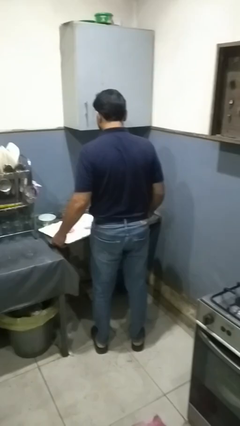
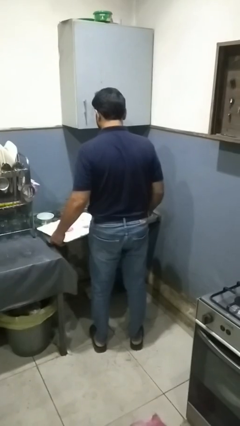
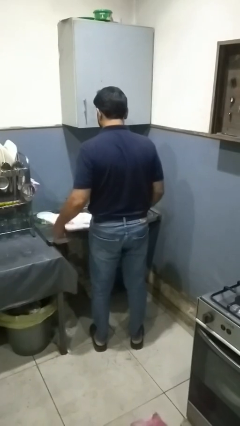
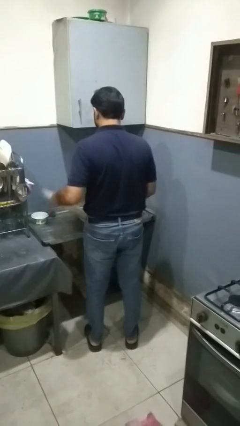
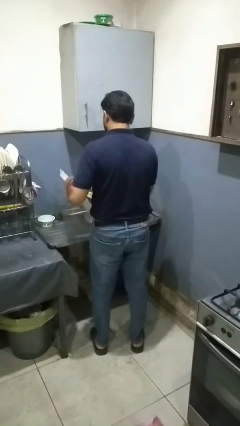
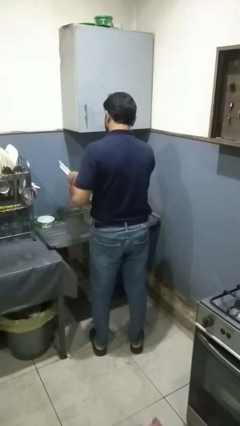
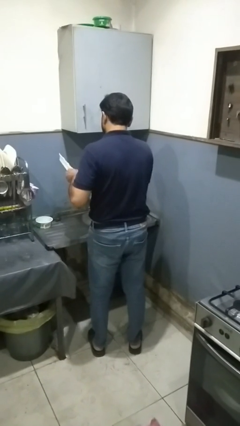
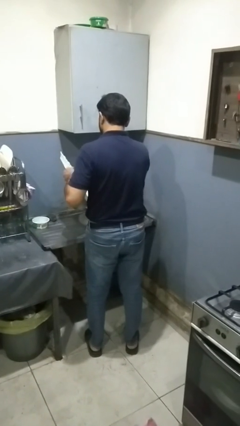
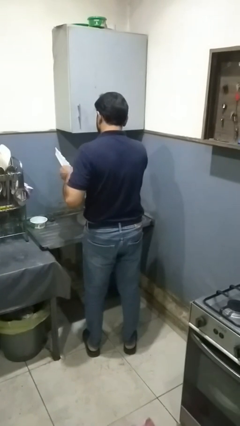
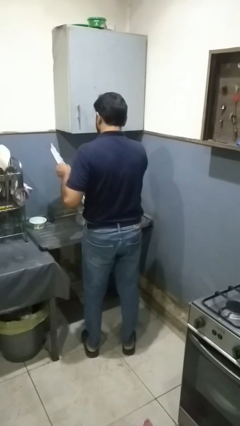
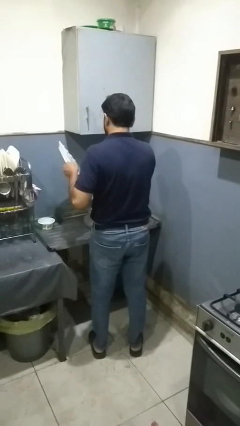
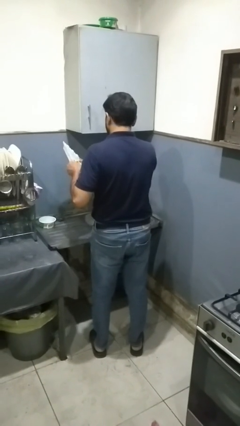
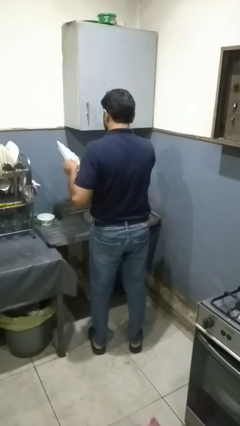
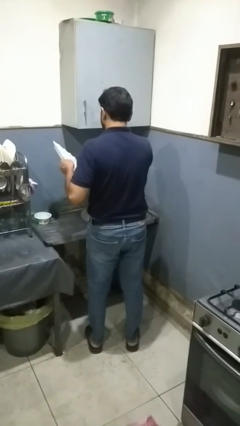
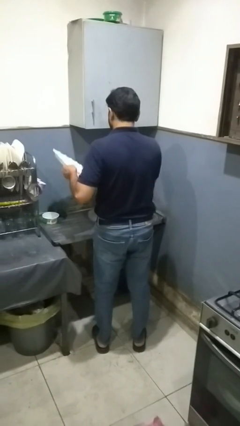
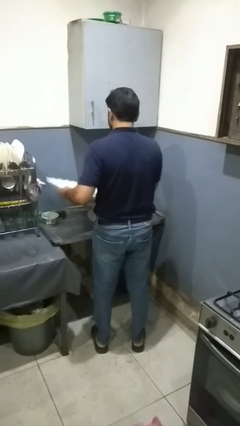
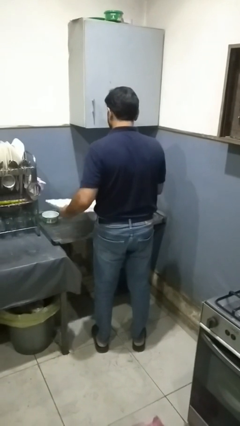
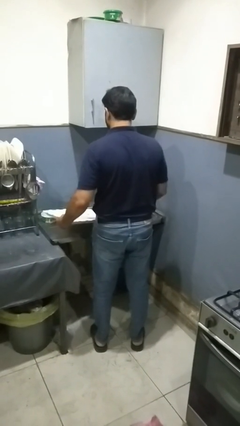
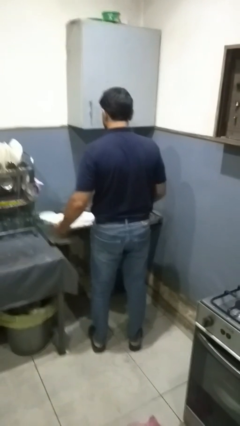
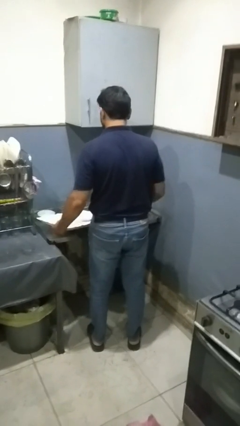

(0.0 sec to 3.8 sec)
person washes dish

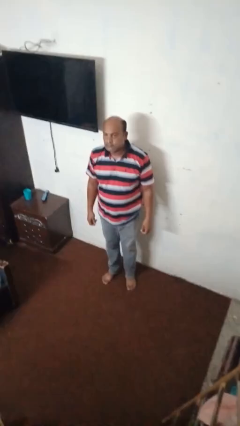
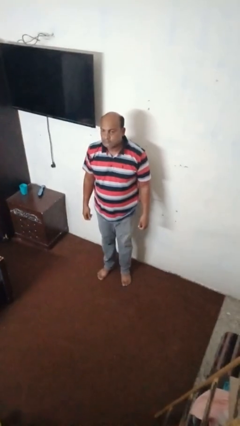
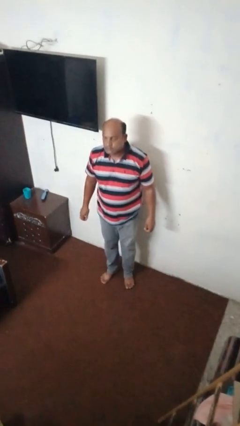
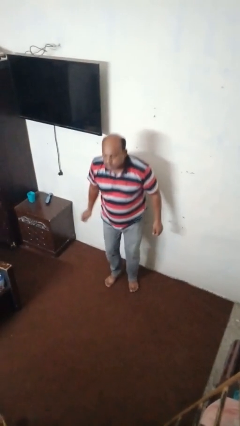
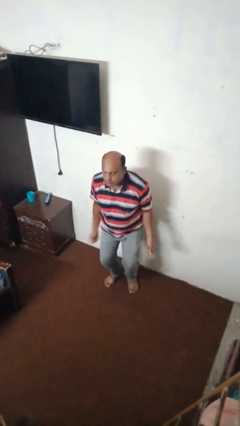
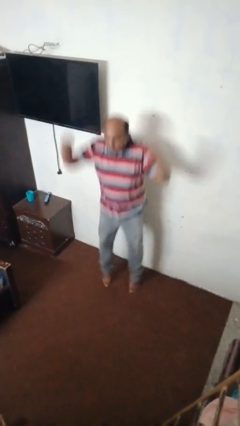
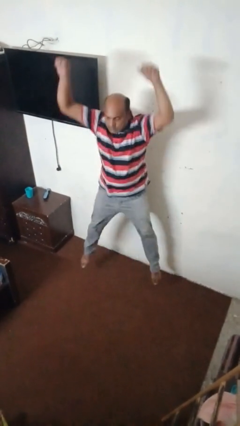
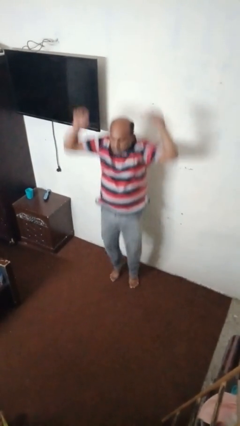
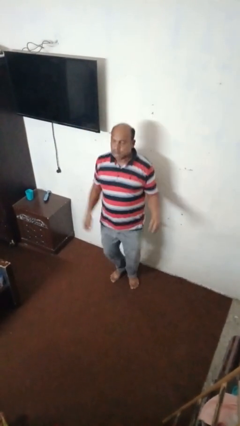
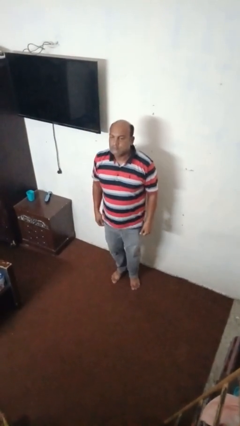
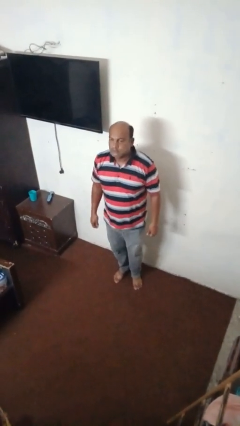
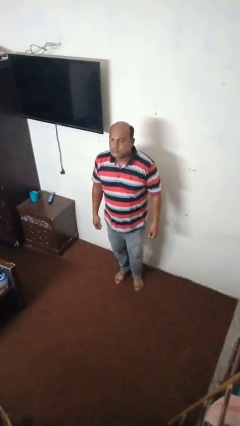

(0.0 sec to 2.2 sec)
person jumps

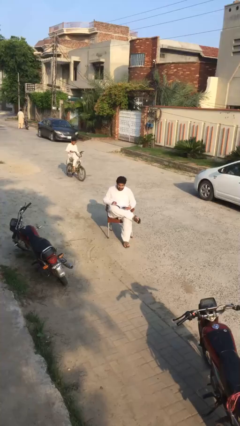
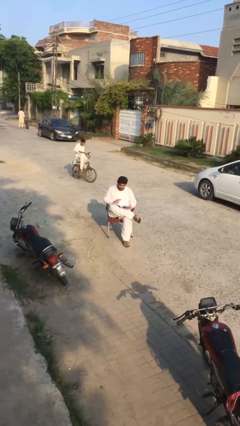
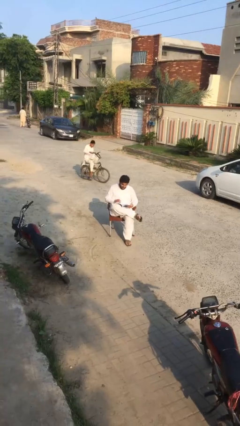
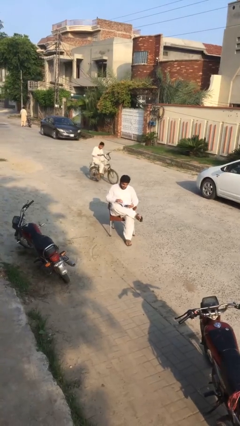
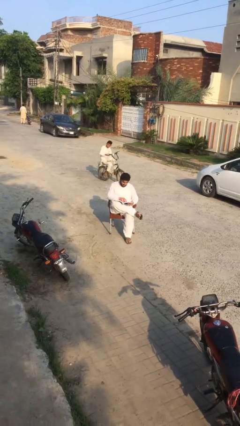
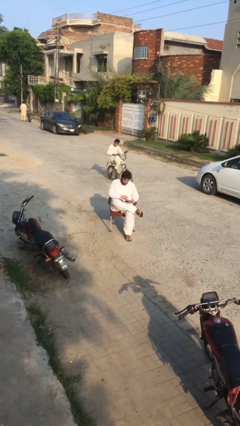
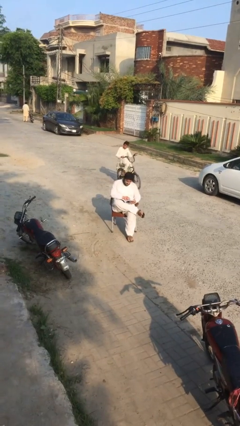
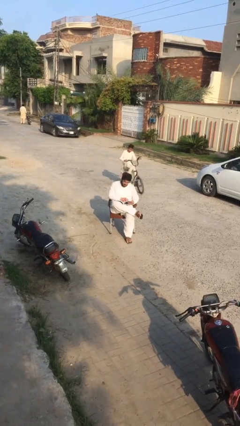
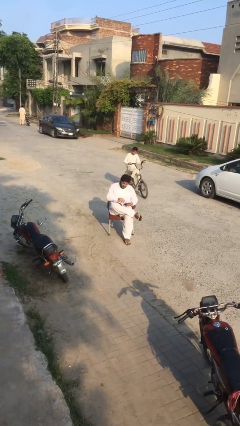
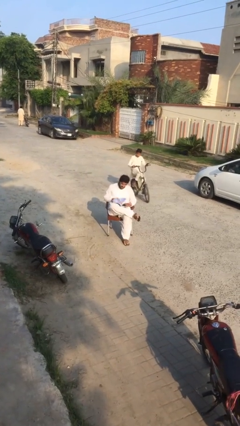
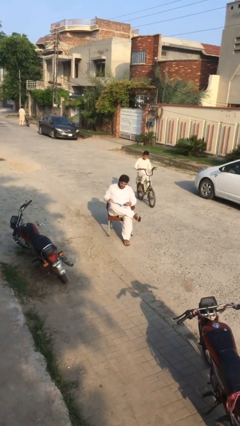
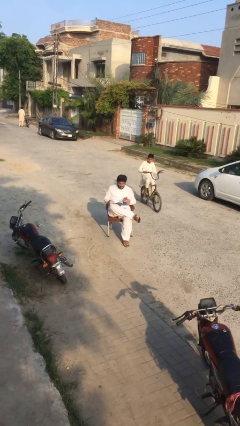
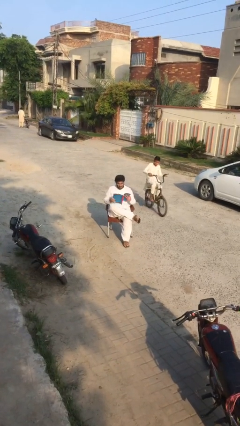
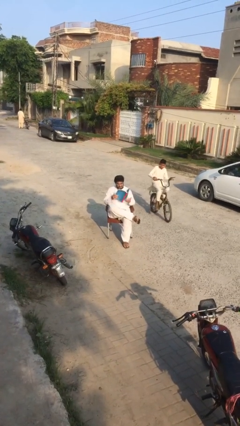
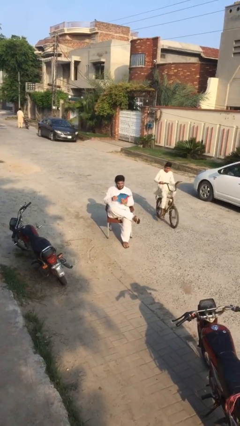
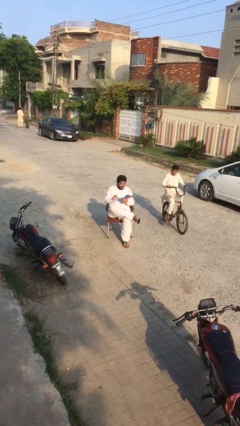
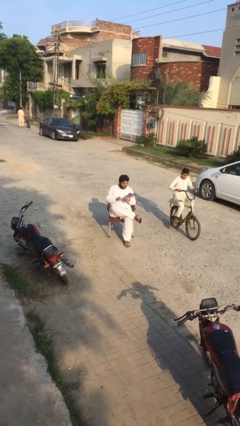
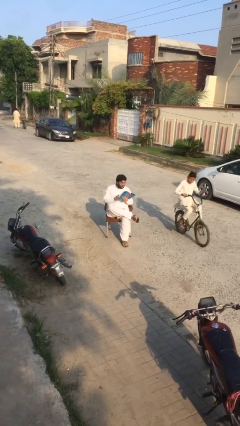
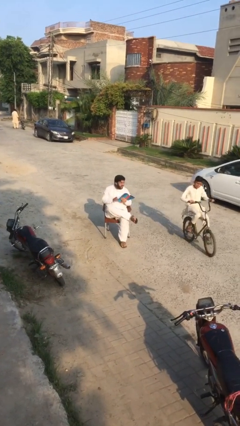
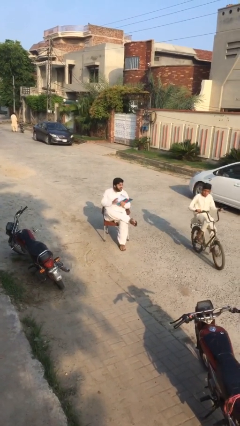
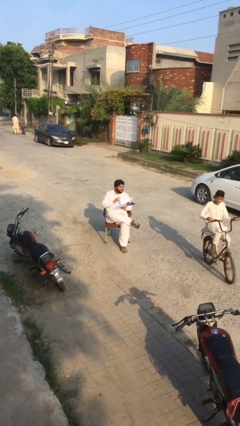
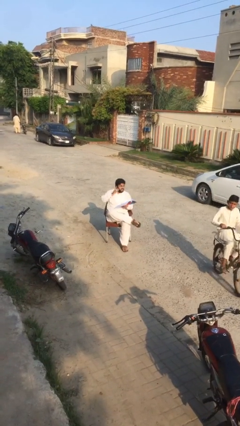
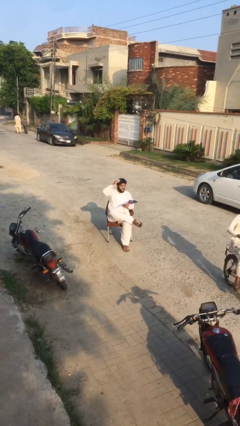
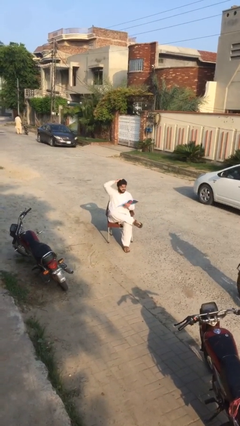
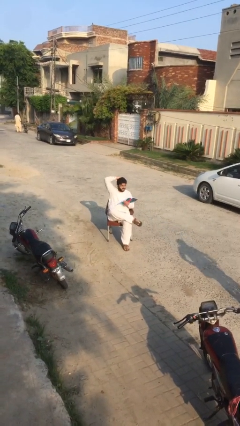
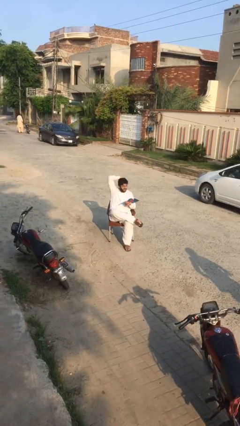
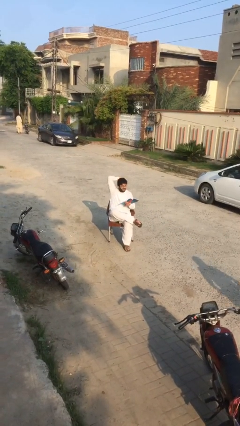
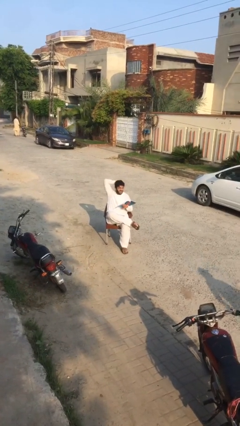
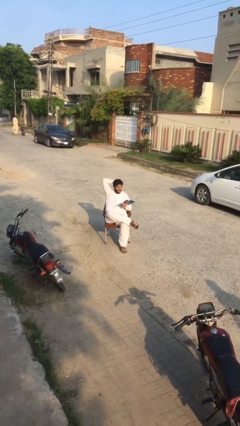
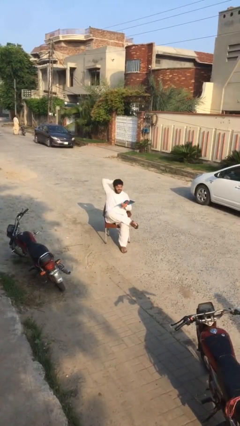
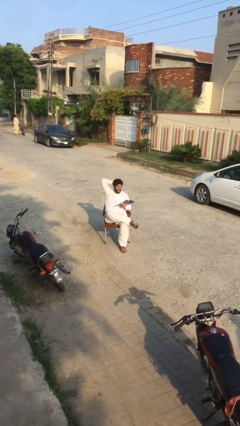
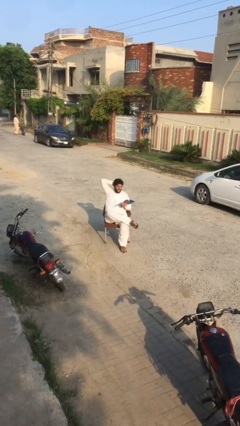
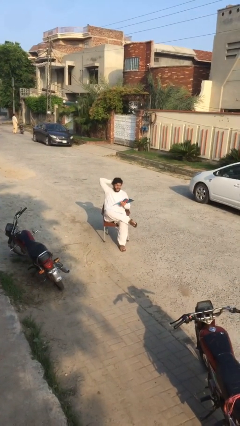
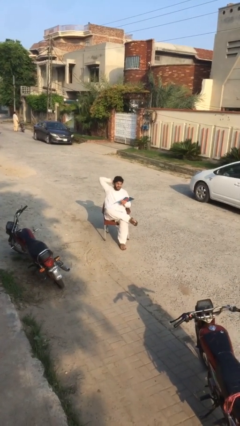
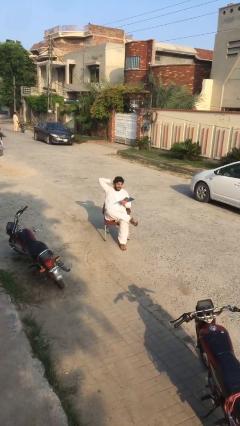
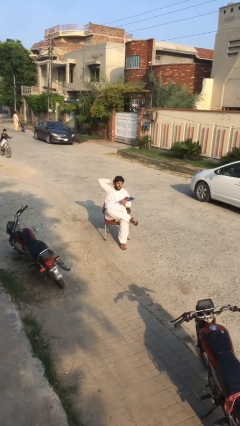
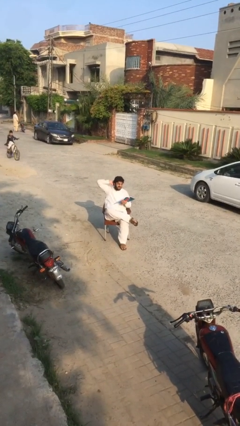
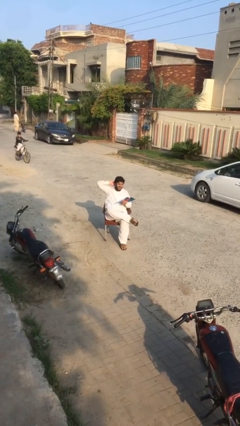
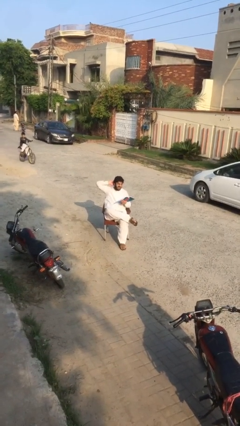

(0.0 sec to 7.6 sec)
person reads document

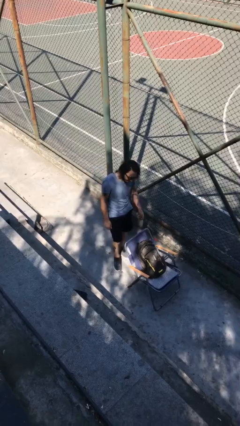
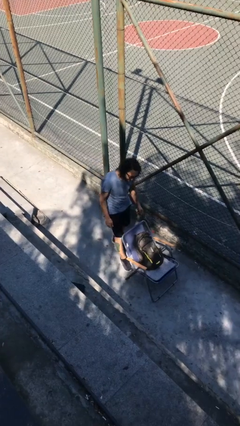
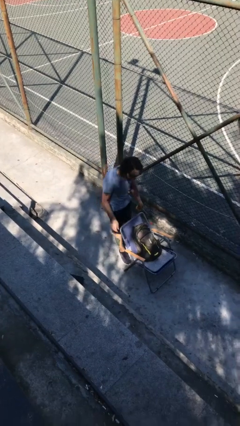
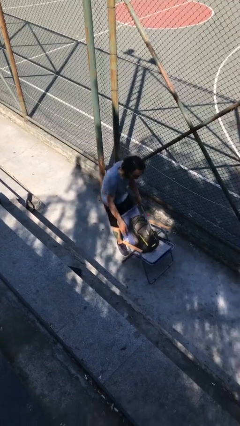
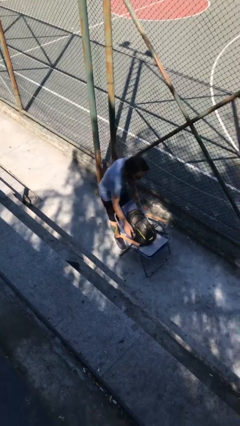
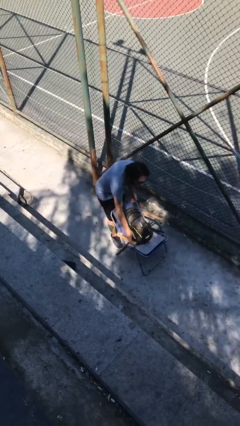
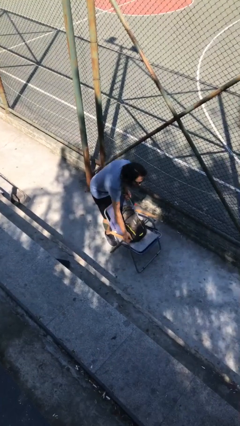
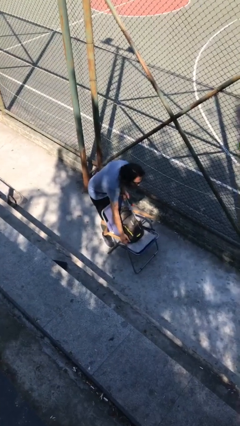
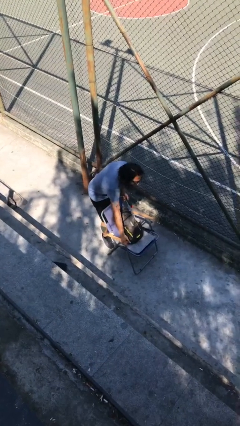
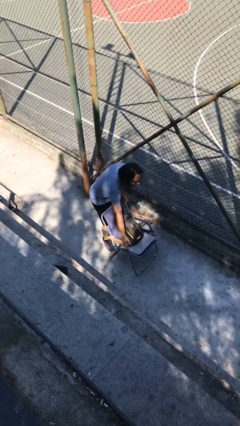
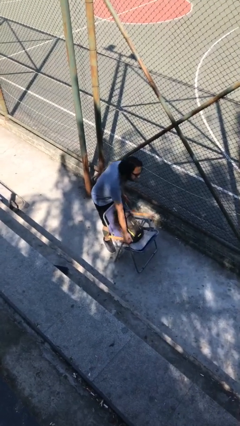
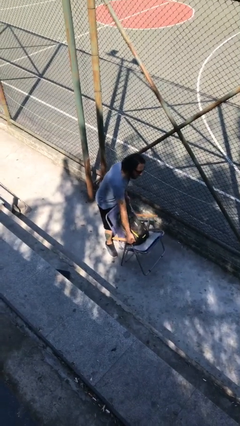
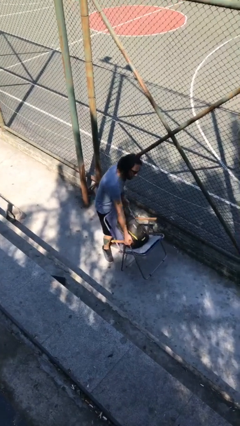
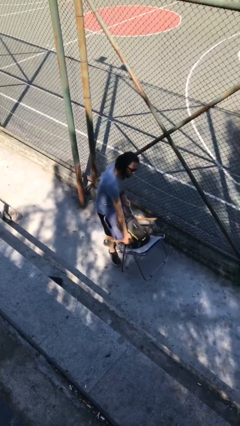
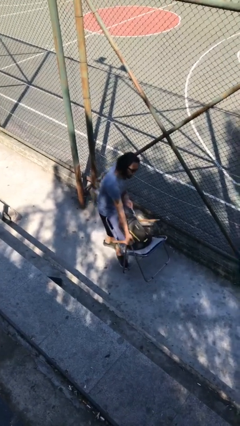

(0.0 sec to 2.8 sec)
person picks up object from floor

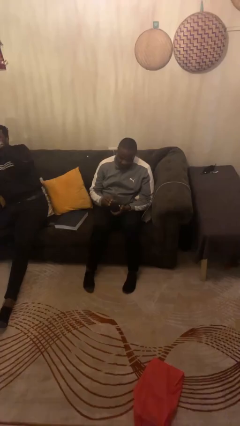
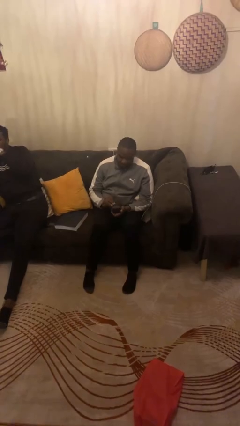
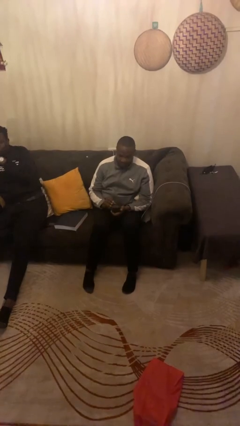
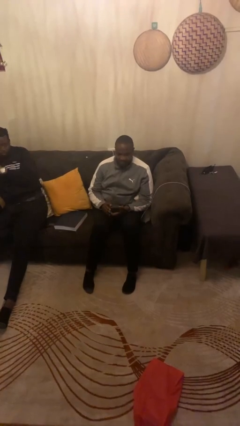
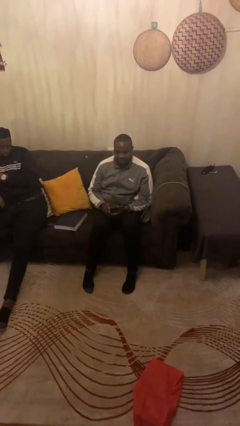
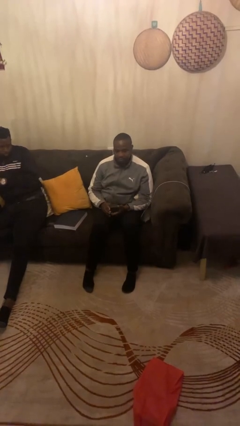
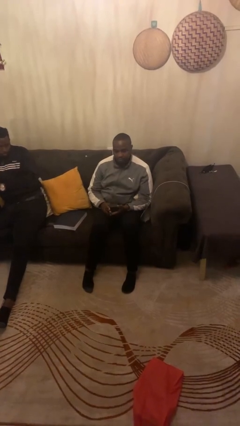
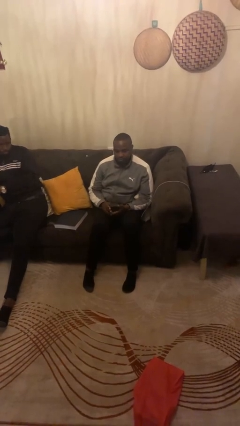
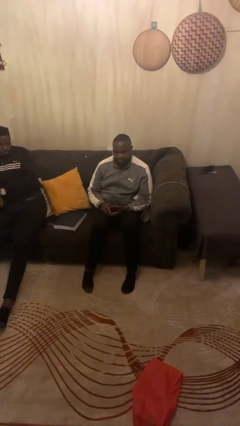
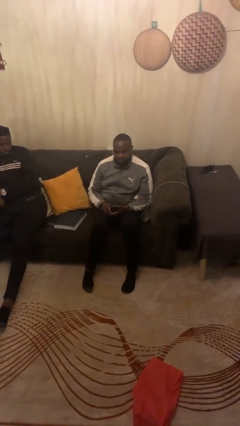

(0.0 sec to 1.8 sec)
person closes jewelry box
